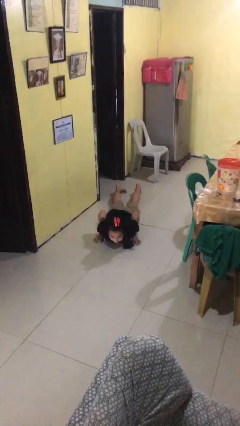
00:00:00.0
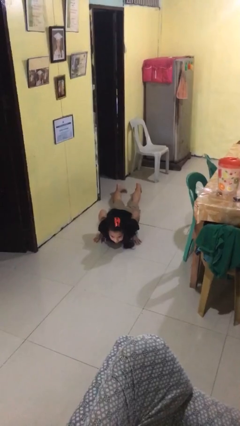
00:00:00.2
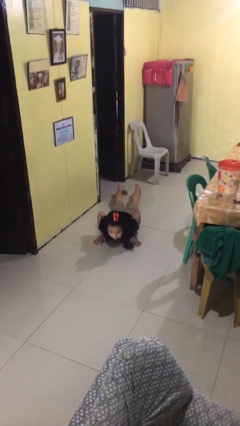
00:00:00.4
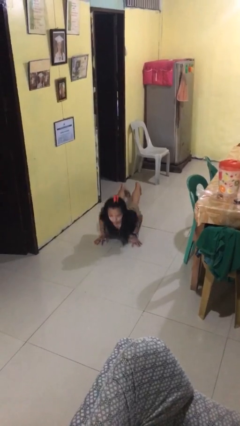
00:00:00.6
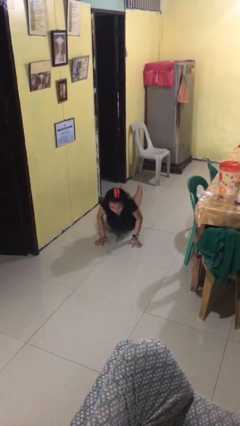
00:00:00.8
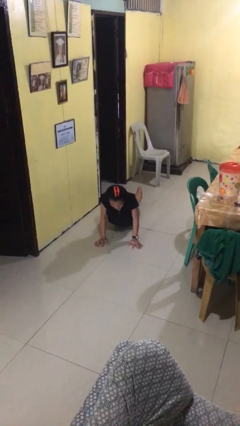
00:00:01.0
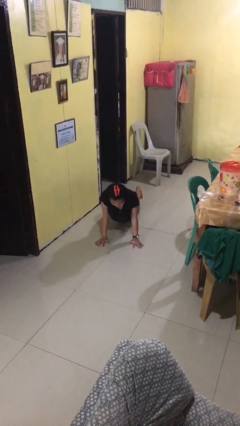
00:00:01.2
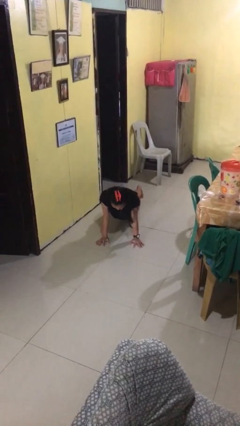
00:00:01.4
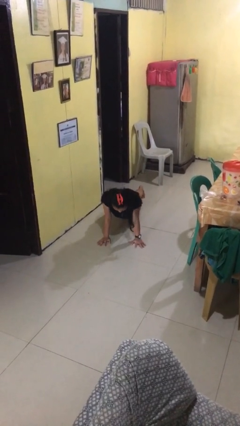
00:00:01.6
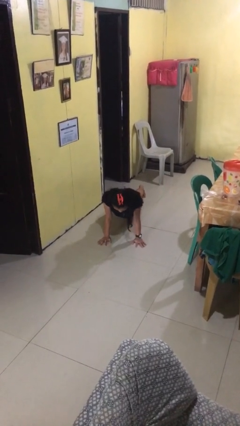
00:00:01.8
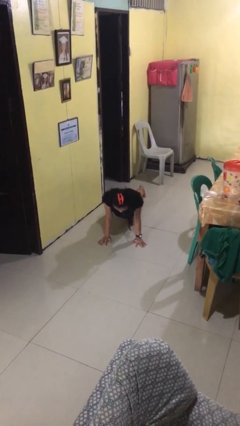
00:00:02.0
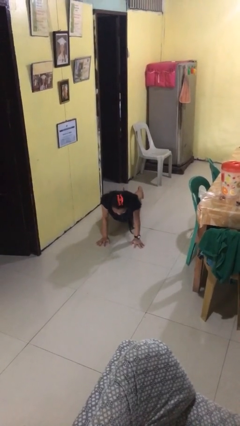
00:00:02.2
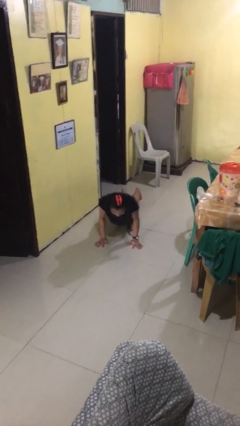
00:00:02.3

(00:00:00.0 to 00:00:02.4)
person exercises with pushup

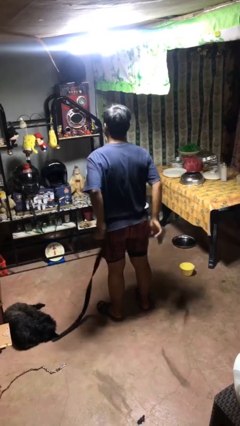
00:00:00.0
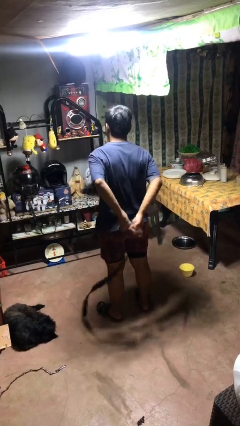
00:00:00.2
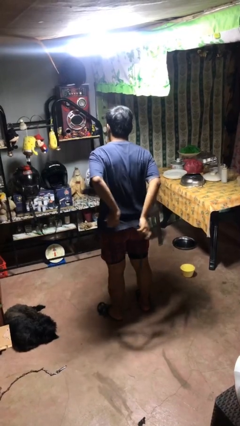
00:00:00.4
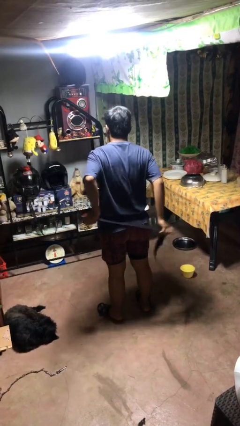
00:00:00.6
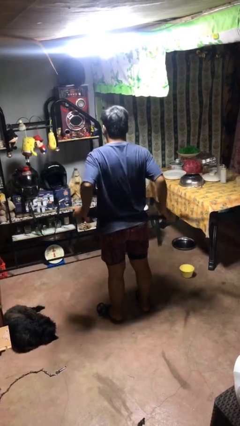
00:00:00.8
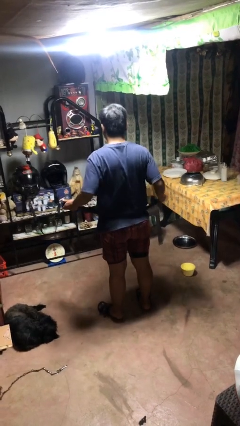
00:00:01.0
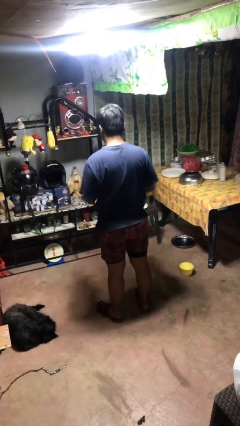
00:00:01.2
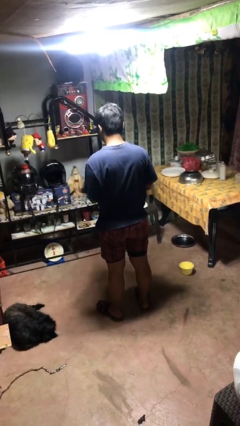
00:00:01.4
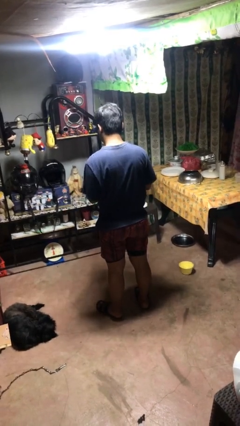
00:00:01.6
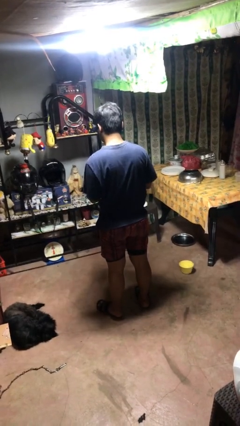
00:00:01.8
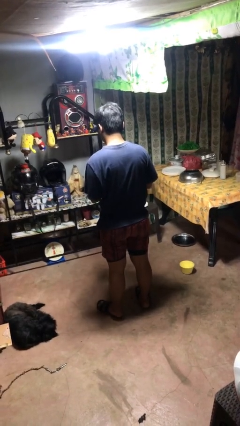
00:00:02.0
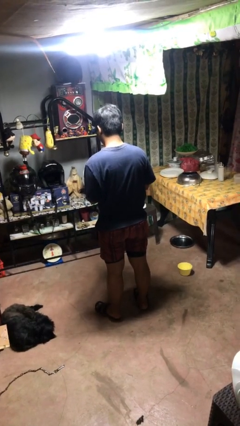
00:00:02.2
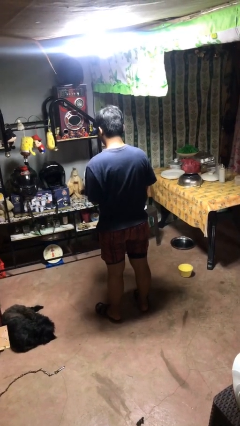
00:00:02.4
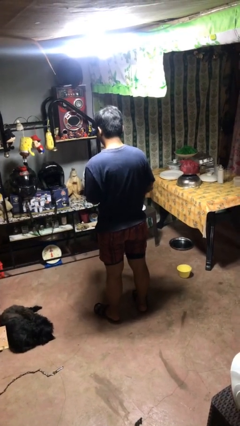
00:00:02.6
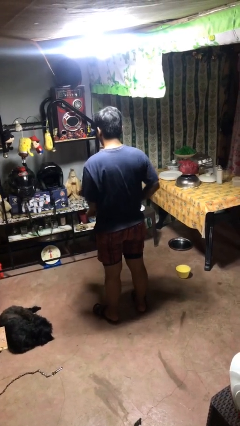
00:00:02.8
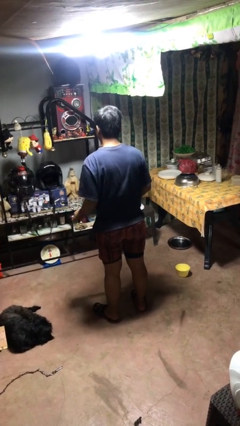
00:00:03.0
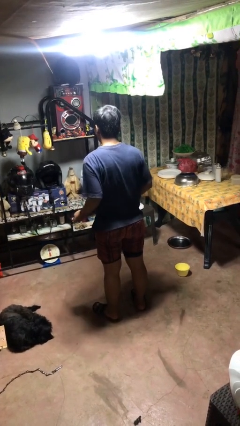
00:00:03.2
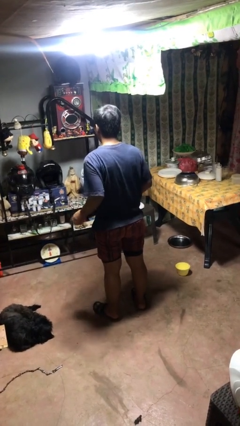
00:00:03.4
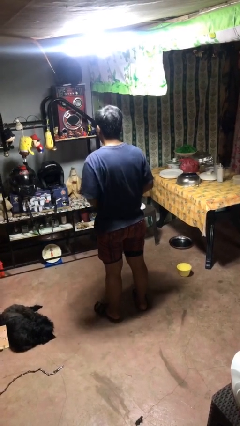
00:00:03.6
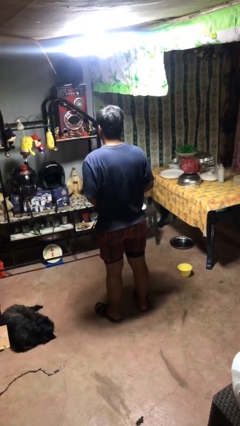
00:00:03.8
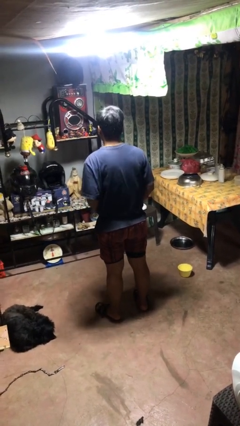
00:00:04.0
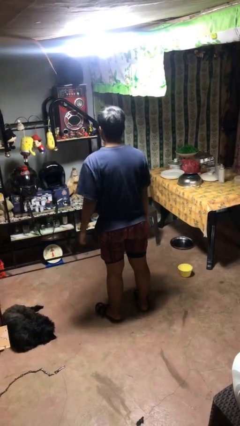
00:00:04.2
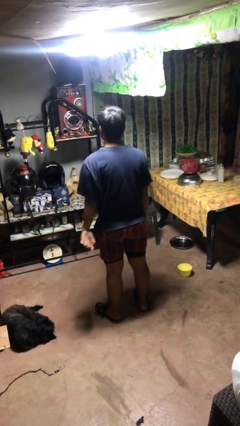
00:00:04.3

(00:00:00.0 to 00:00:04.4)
person puts on belt

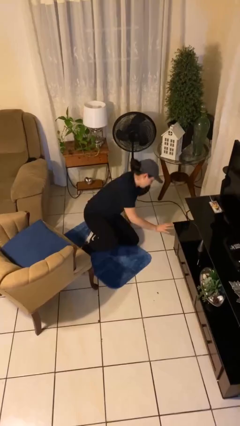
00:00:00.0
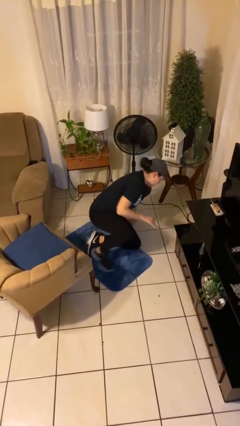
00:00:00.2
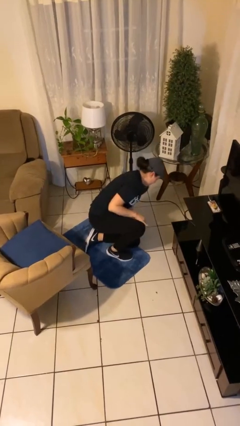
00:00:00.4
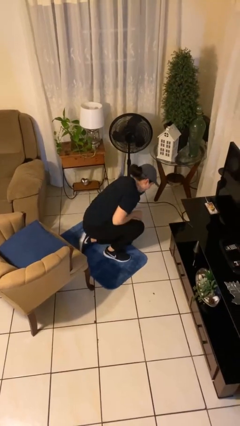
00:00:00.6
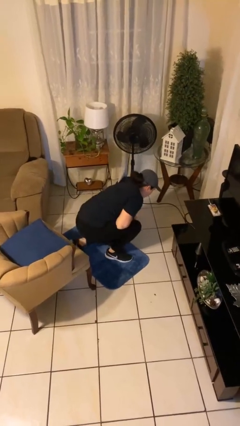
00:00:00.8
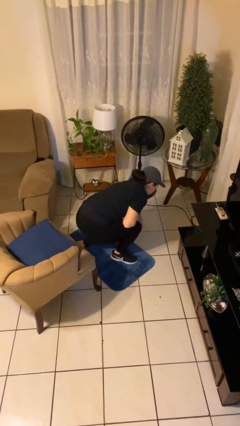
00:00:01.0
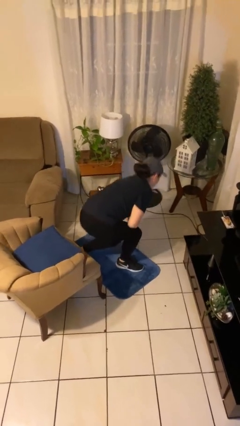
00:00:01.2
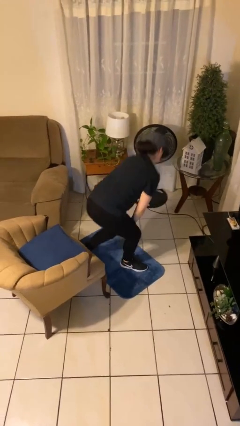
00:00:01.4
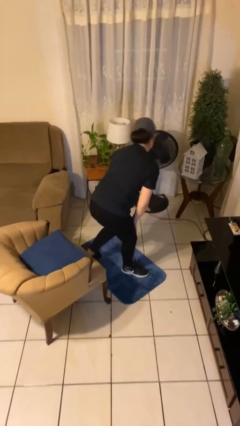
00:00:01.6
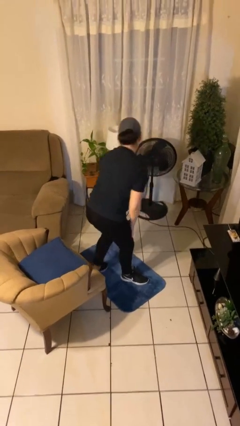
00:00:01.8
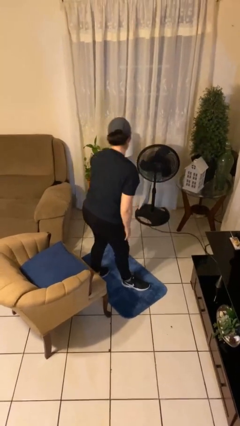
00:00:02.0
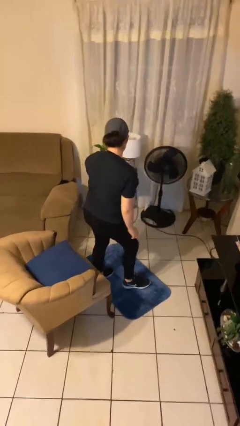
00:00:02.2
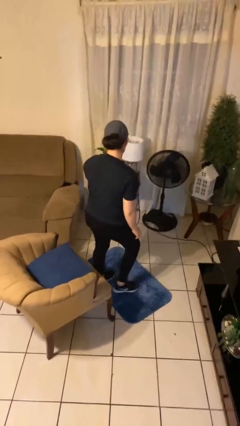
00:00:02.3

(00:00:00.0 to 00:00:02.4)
person stands up from floor

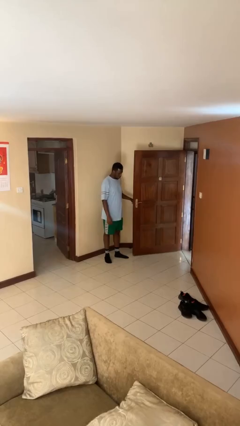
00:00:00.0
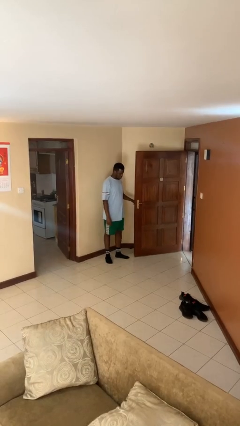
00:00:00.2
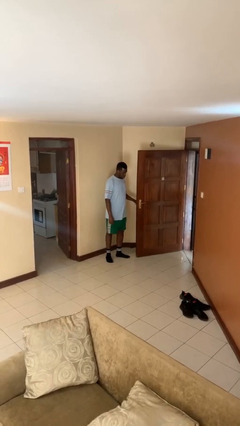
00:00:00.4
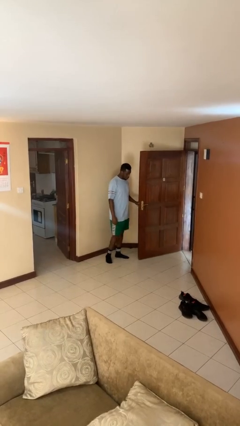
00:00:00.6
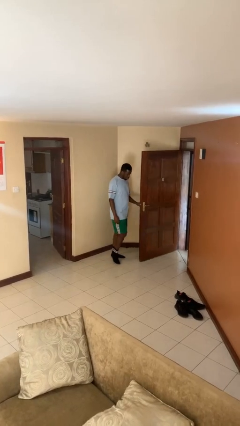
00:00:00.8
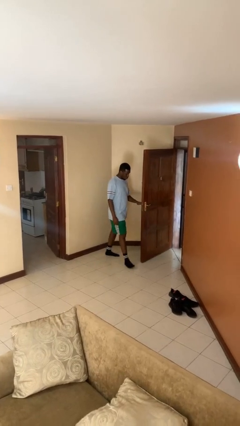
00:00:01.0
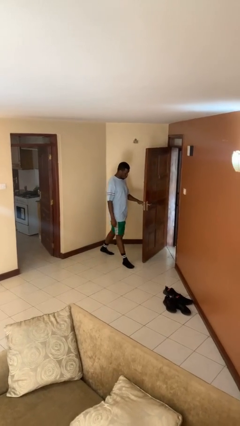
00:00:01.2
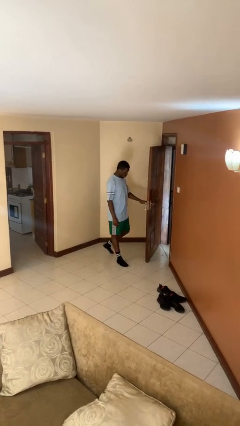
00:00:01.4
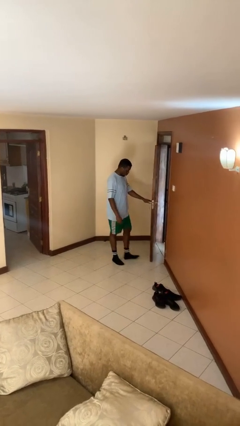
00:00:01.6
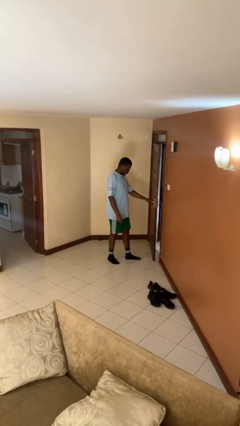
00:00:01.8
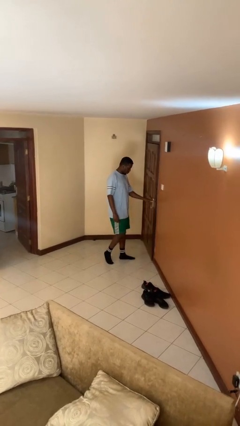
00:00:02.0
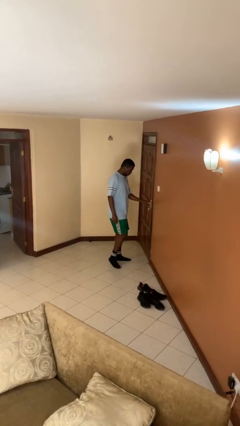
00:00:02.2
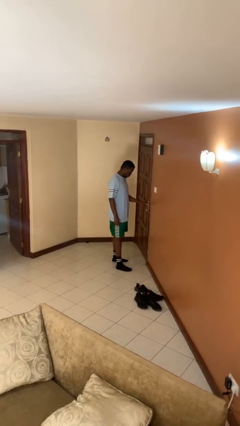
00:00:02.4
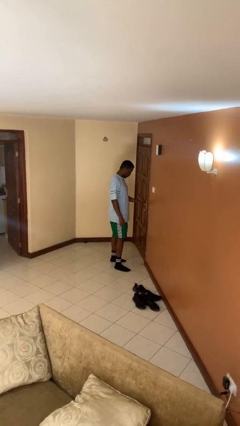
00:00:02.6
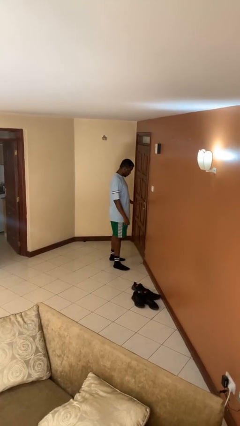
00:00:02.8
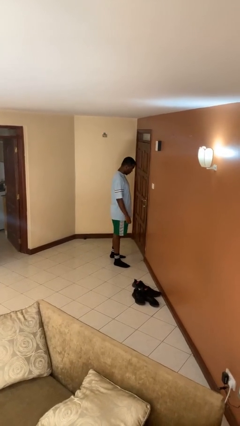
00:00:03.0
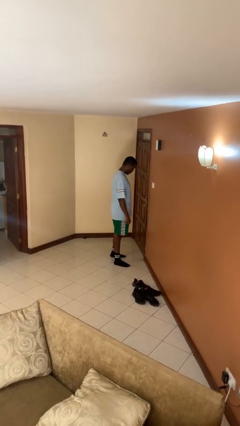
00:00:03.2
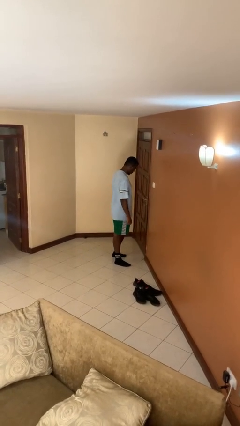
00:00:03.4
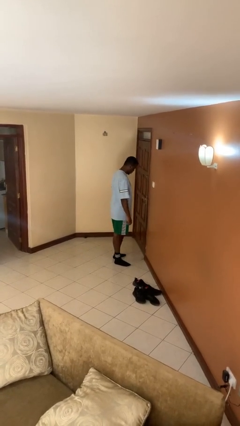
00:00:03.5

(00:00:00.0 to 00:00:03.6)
person closes facility door

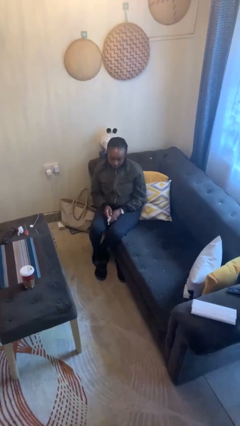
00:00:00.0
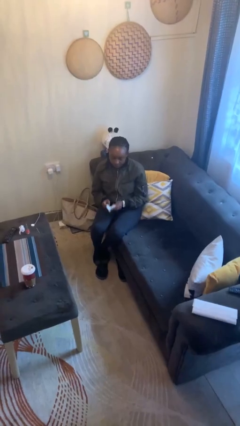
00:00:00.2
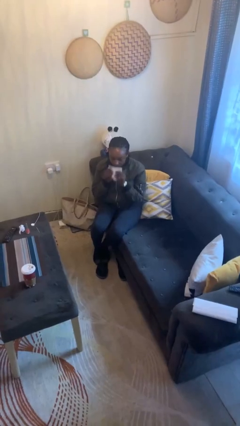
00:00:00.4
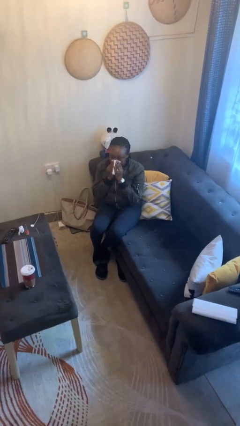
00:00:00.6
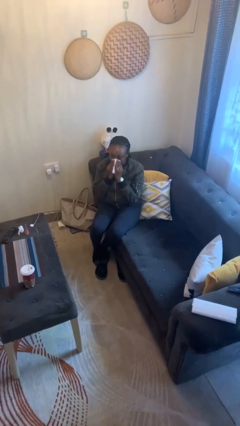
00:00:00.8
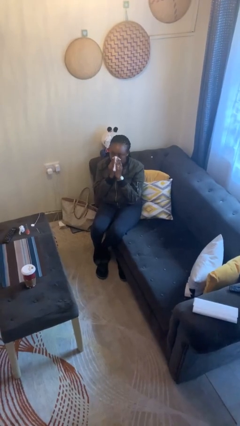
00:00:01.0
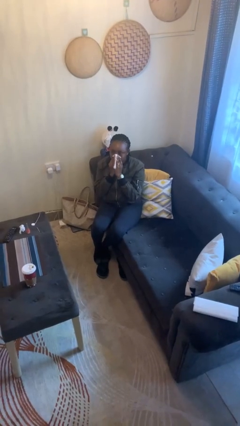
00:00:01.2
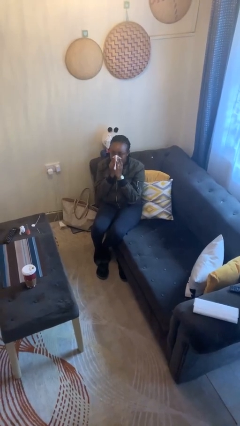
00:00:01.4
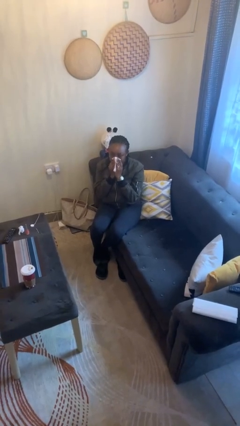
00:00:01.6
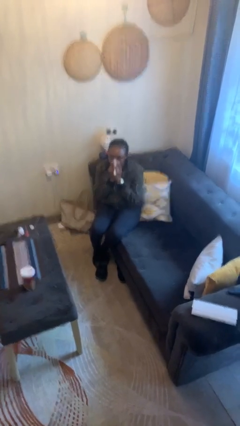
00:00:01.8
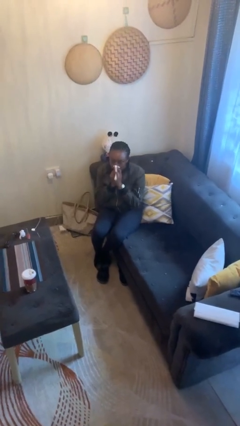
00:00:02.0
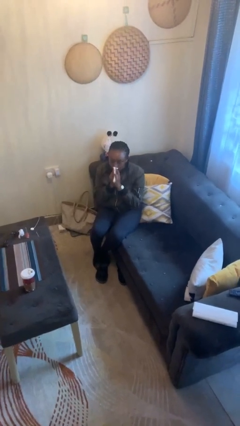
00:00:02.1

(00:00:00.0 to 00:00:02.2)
person blows nose

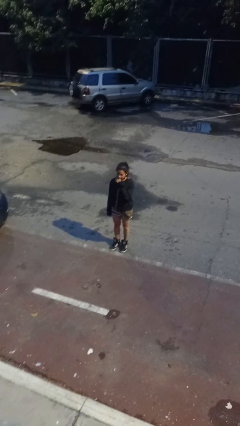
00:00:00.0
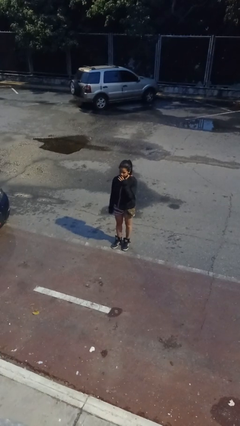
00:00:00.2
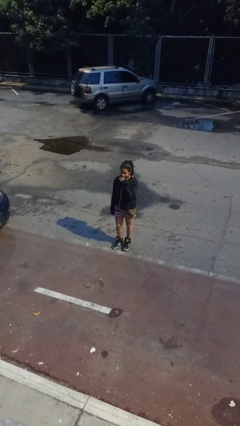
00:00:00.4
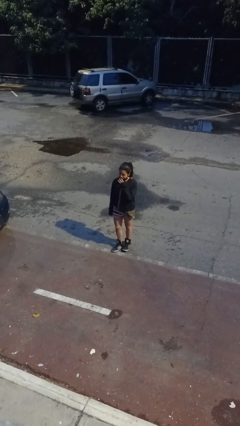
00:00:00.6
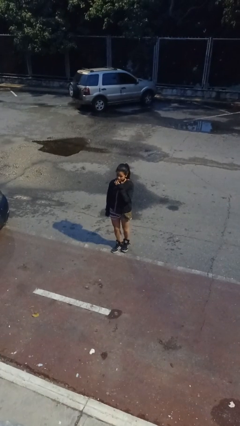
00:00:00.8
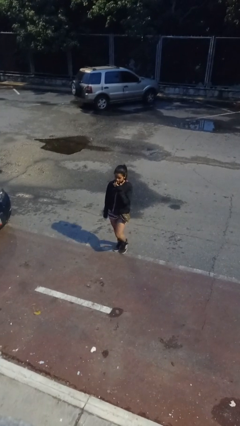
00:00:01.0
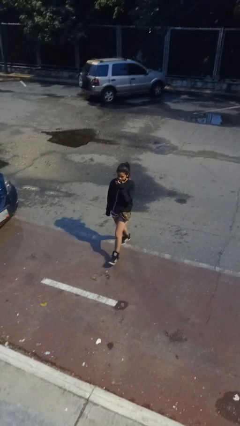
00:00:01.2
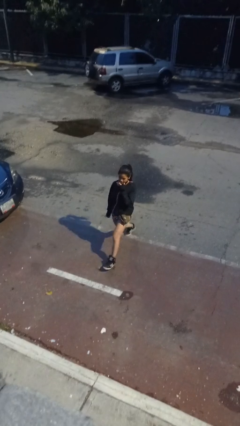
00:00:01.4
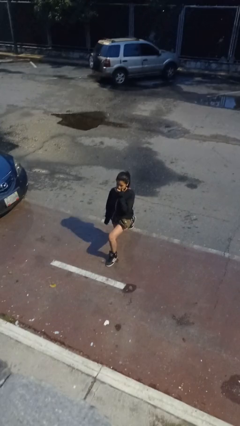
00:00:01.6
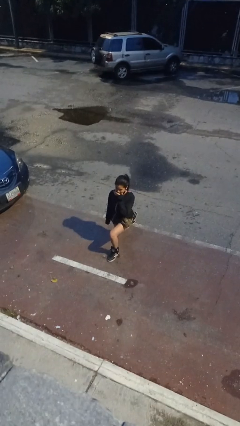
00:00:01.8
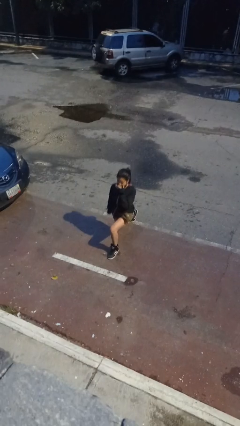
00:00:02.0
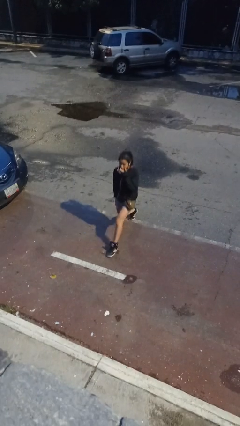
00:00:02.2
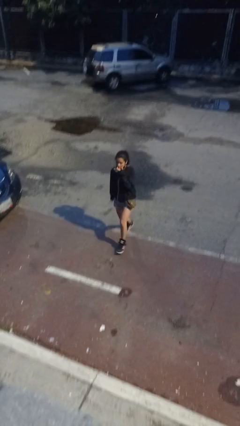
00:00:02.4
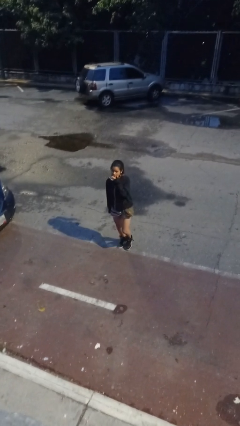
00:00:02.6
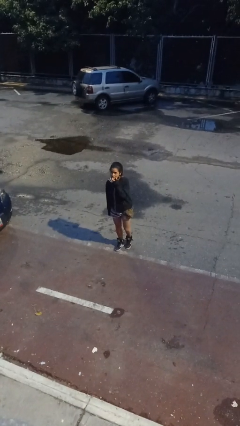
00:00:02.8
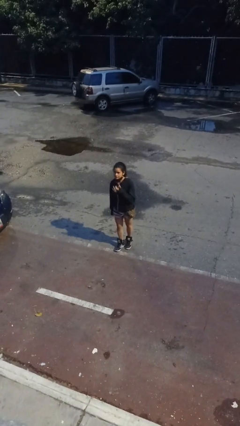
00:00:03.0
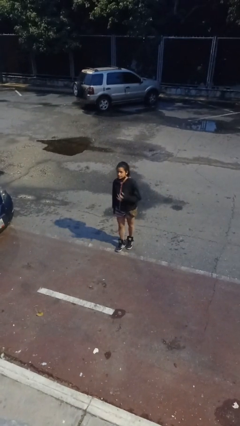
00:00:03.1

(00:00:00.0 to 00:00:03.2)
person exercises with lunges
